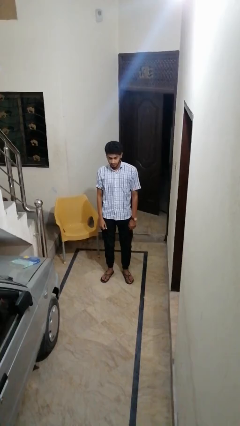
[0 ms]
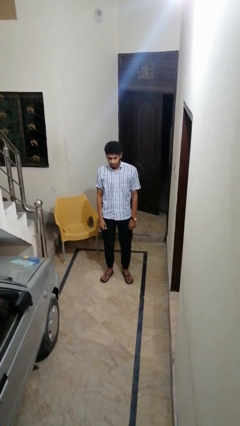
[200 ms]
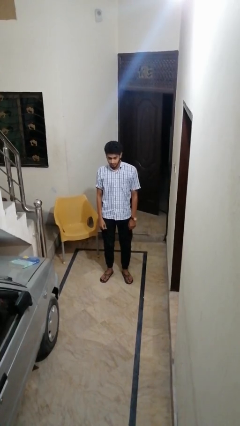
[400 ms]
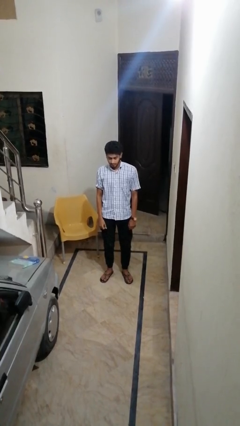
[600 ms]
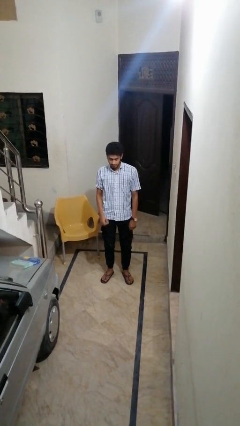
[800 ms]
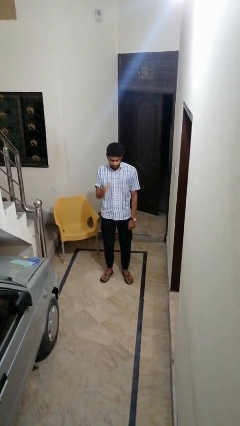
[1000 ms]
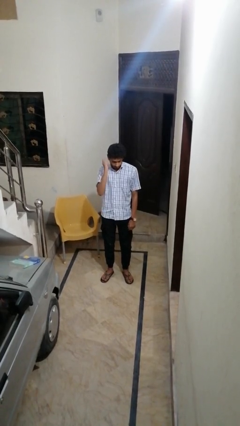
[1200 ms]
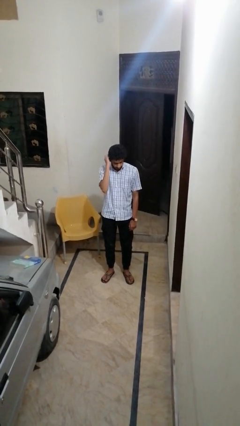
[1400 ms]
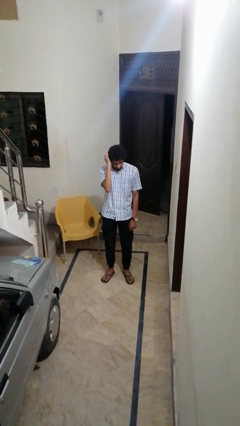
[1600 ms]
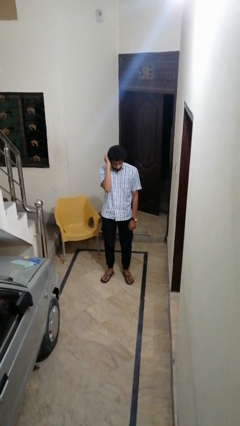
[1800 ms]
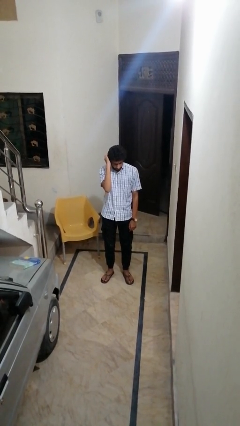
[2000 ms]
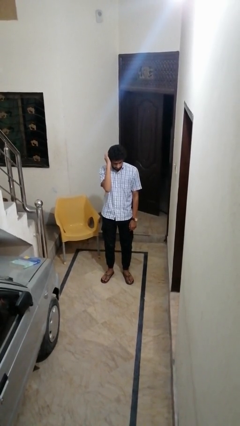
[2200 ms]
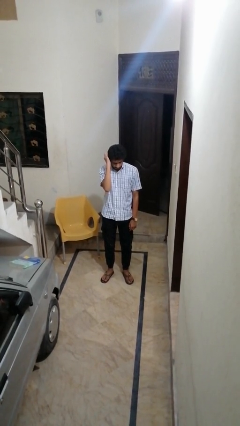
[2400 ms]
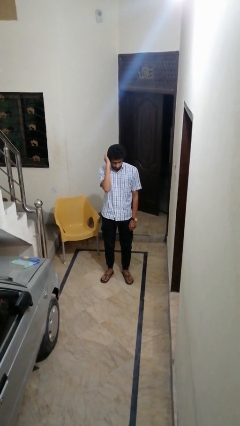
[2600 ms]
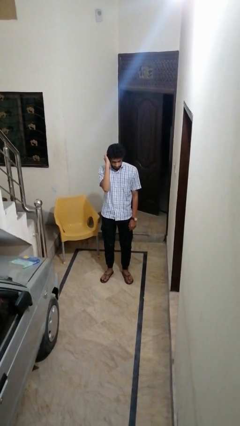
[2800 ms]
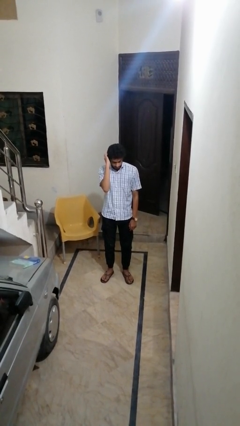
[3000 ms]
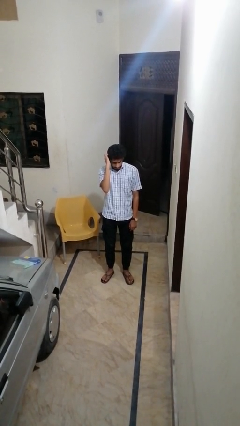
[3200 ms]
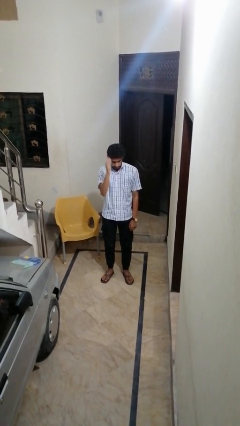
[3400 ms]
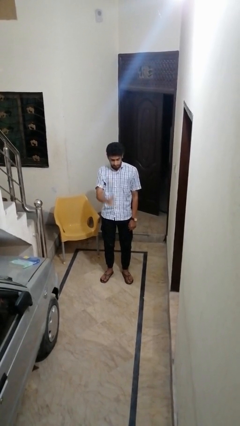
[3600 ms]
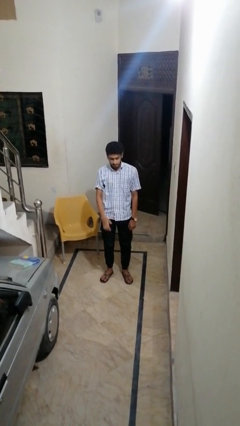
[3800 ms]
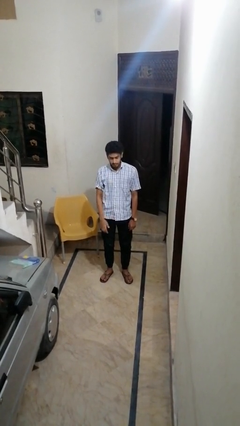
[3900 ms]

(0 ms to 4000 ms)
person scratches face

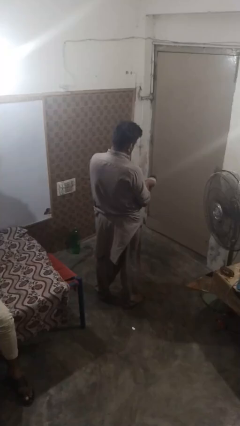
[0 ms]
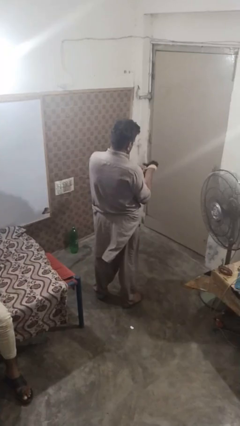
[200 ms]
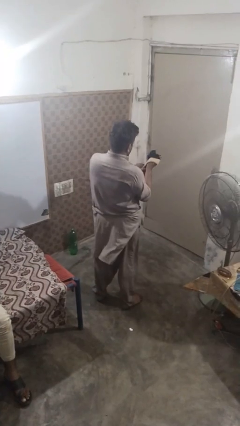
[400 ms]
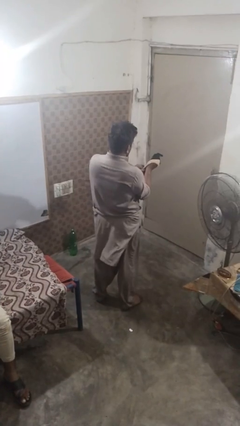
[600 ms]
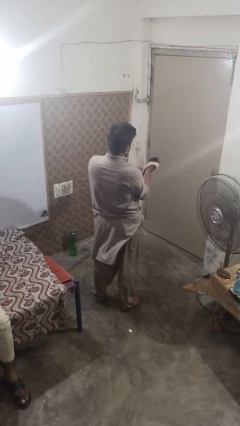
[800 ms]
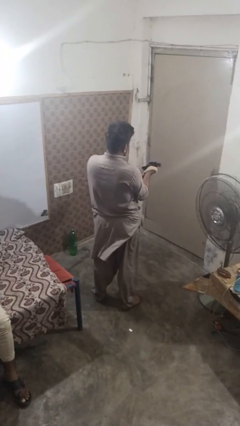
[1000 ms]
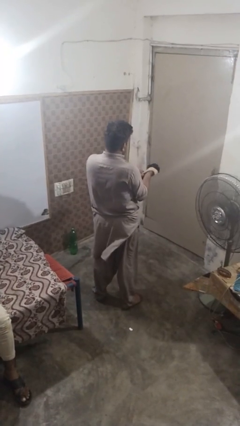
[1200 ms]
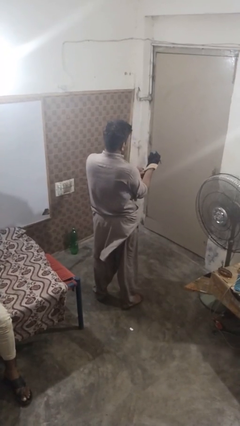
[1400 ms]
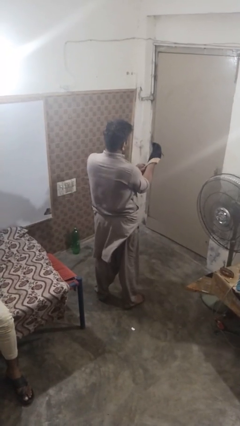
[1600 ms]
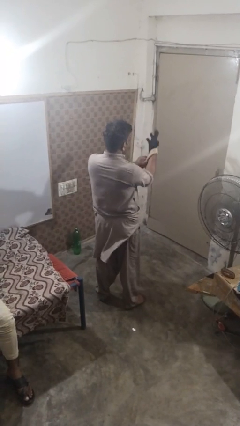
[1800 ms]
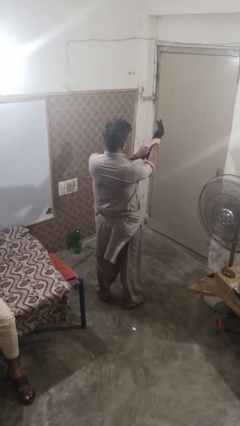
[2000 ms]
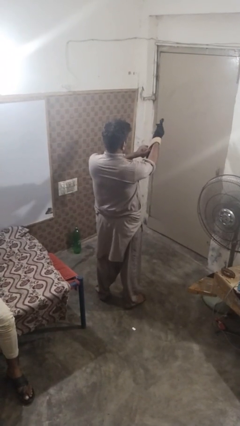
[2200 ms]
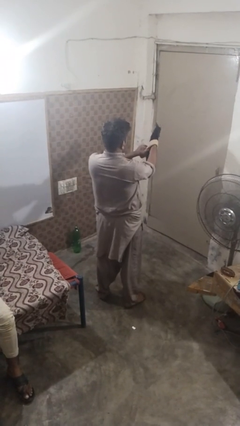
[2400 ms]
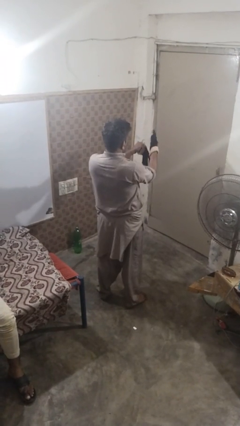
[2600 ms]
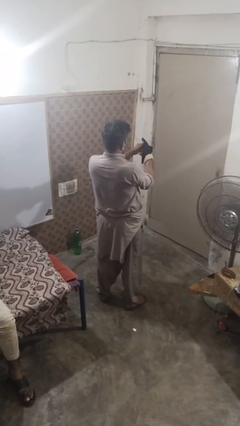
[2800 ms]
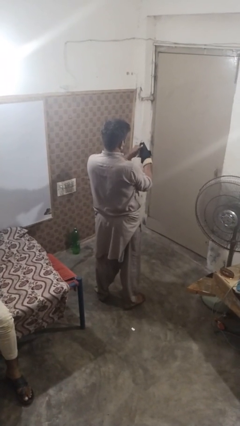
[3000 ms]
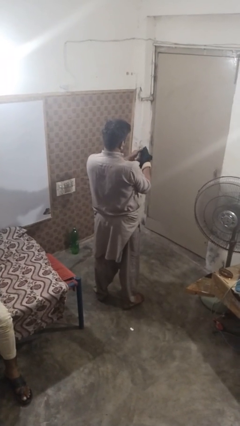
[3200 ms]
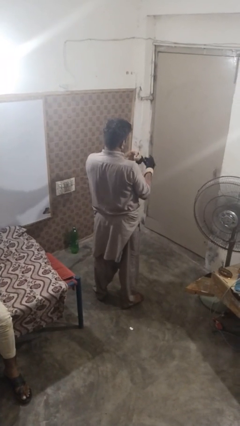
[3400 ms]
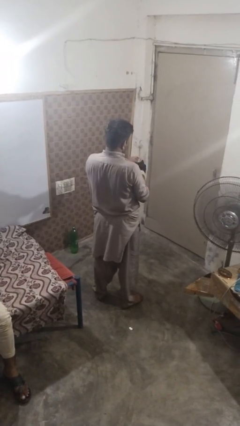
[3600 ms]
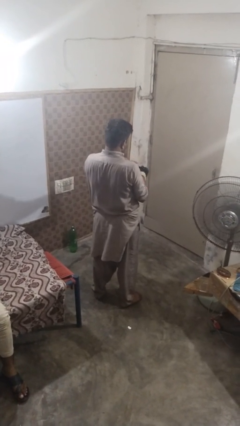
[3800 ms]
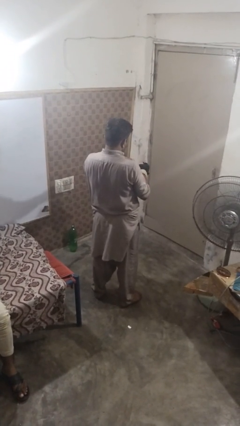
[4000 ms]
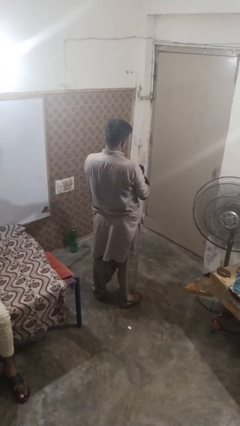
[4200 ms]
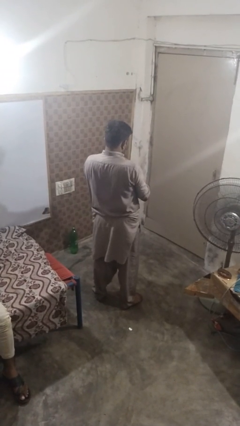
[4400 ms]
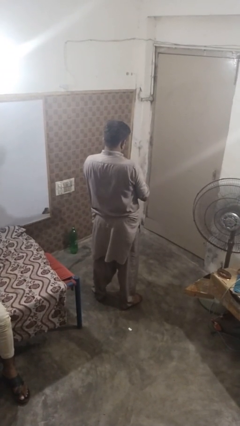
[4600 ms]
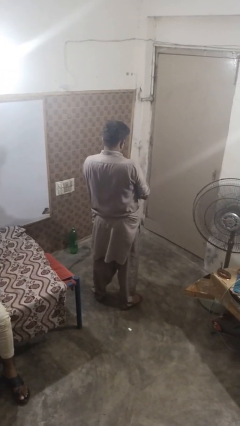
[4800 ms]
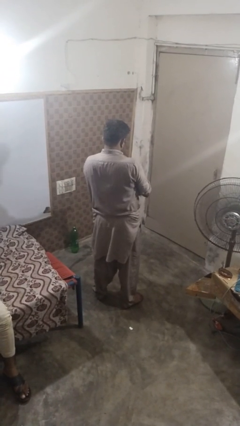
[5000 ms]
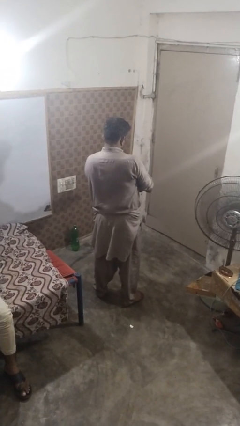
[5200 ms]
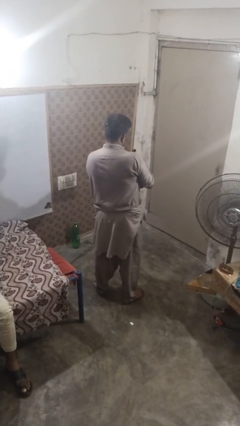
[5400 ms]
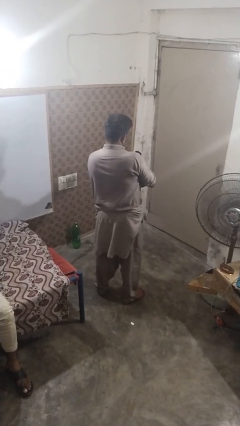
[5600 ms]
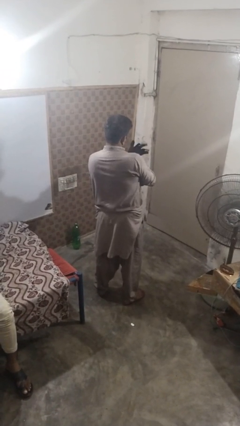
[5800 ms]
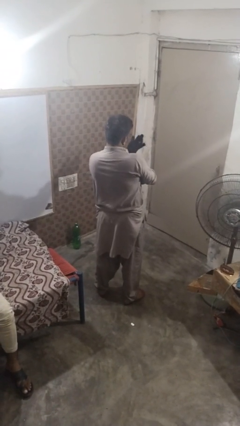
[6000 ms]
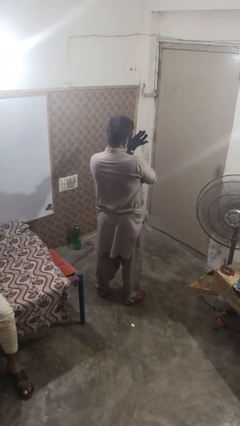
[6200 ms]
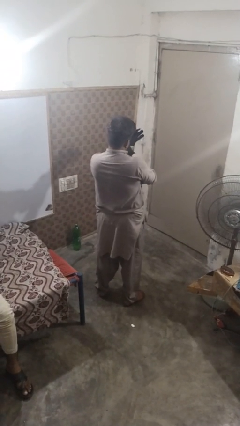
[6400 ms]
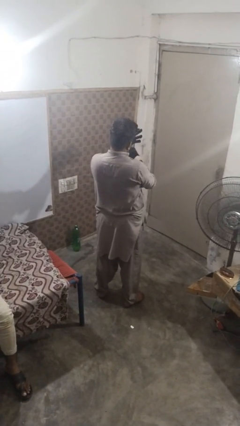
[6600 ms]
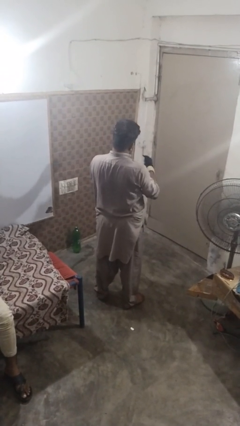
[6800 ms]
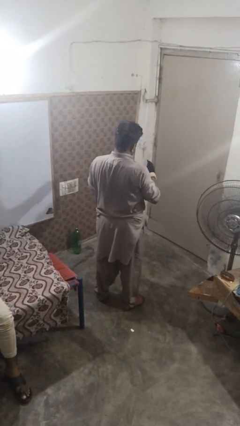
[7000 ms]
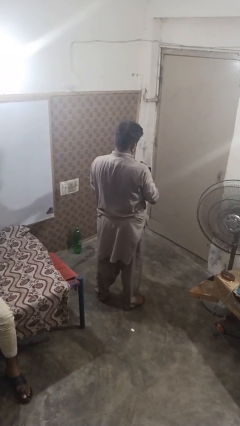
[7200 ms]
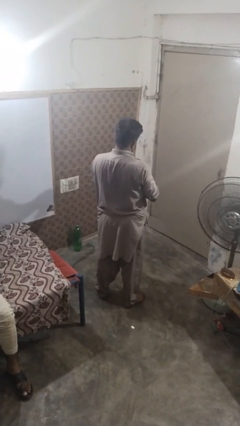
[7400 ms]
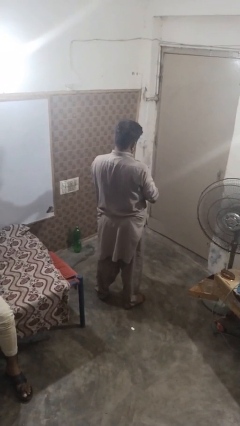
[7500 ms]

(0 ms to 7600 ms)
person puts on gloves

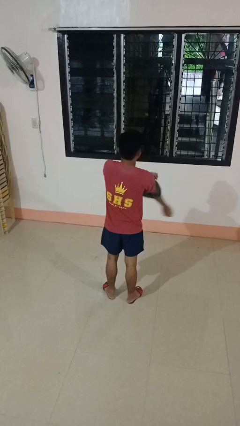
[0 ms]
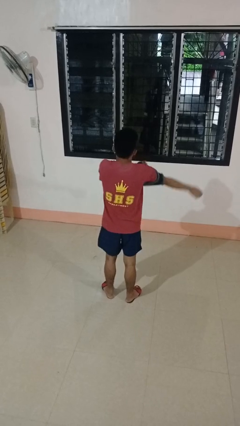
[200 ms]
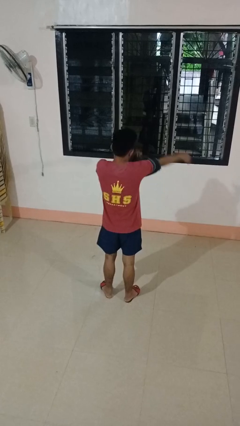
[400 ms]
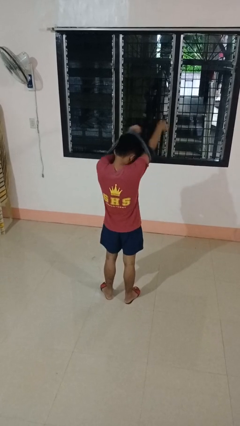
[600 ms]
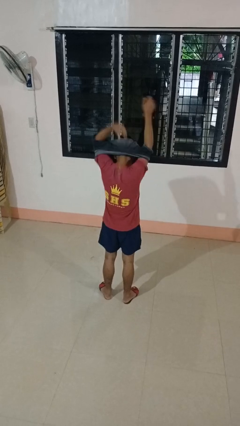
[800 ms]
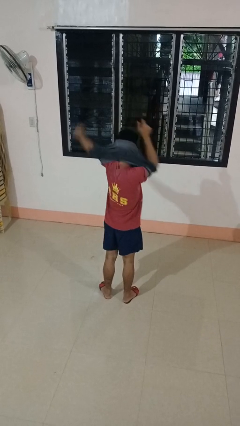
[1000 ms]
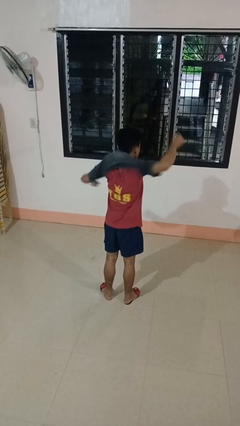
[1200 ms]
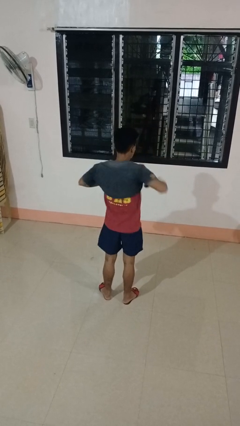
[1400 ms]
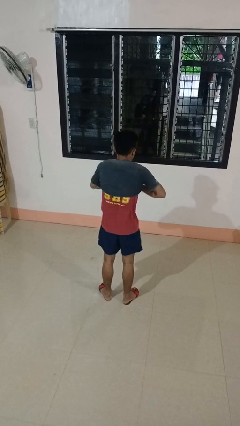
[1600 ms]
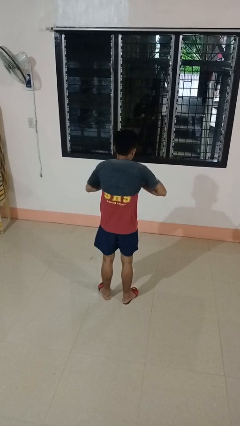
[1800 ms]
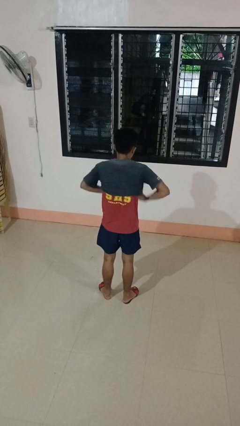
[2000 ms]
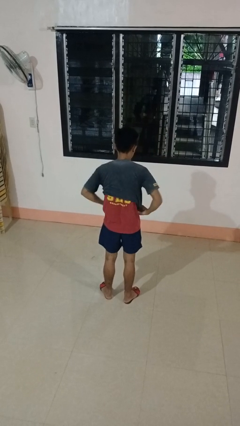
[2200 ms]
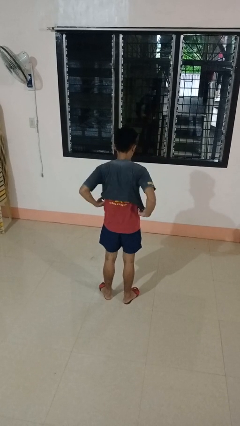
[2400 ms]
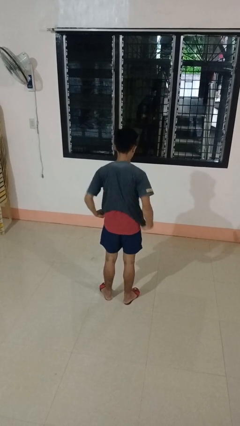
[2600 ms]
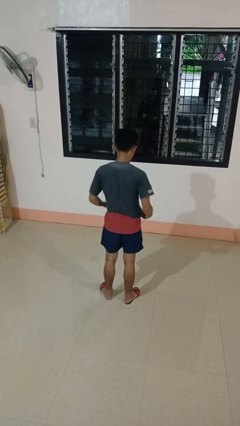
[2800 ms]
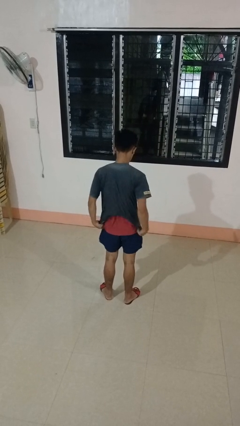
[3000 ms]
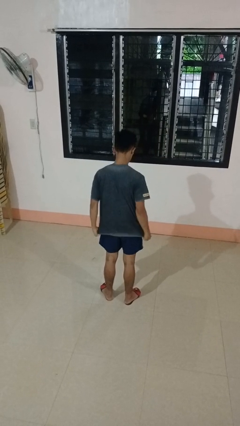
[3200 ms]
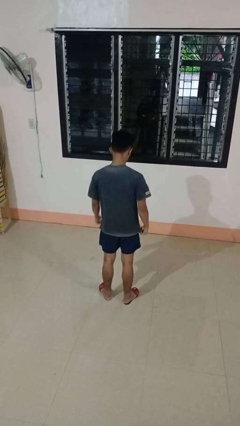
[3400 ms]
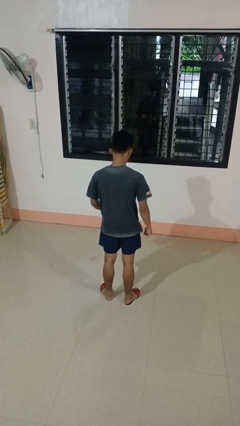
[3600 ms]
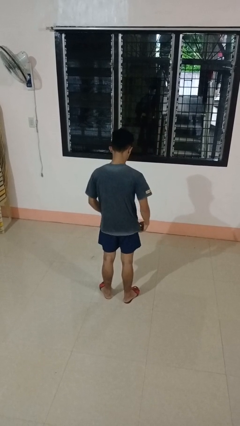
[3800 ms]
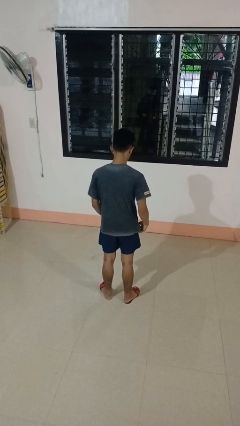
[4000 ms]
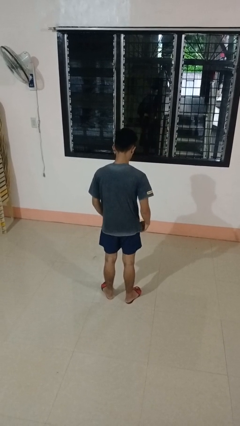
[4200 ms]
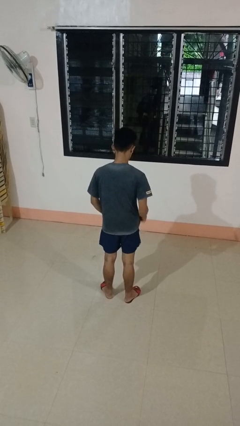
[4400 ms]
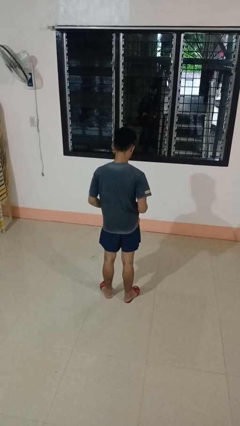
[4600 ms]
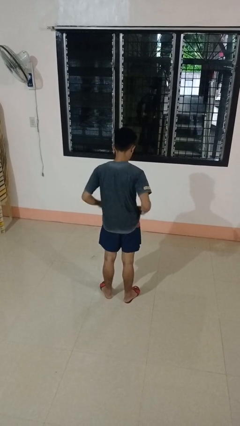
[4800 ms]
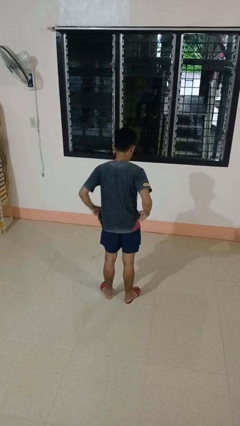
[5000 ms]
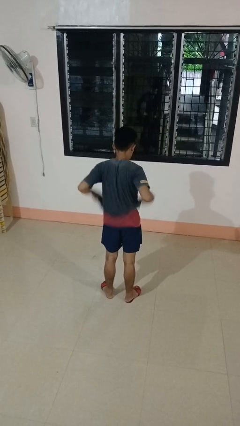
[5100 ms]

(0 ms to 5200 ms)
person puts on shirt

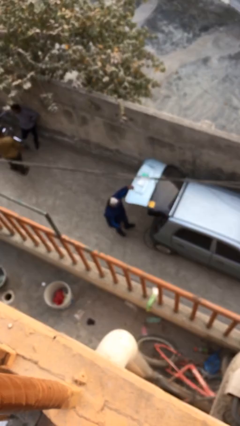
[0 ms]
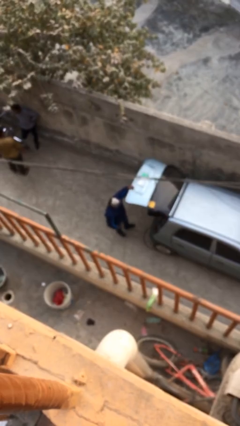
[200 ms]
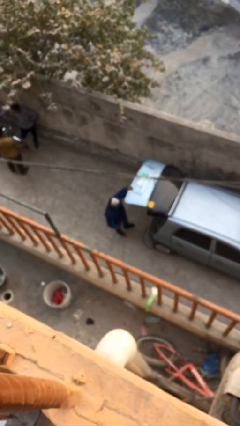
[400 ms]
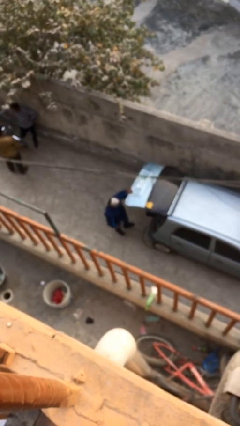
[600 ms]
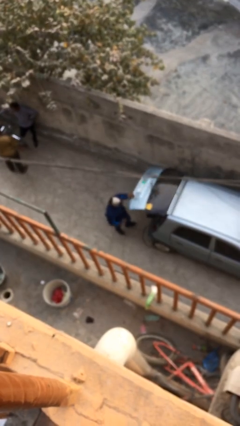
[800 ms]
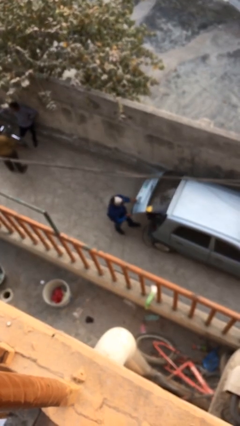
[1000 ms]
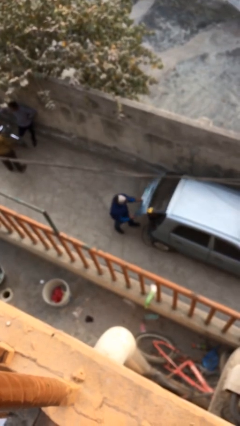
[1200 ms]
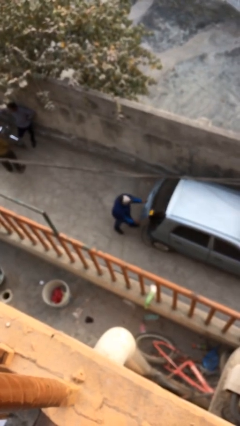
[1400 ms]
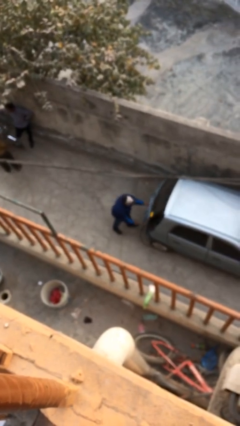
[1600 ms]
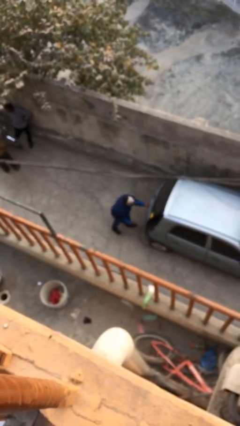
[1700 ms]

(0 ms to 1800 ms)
person closes car trunk
